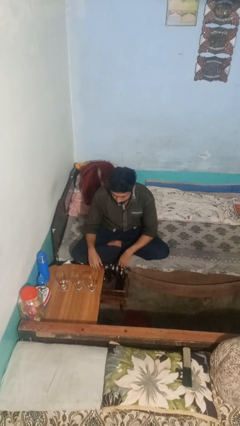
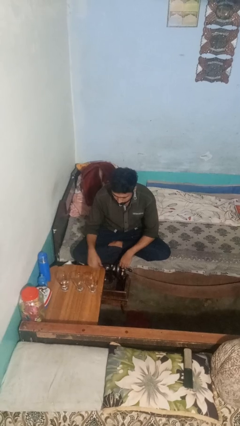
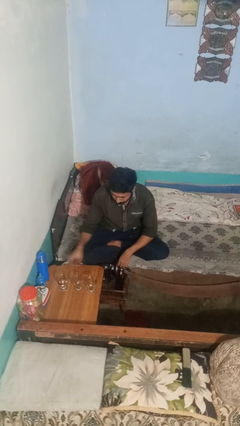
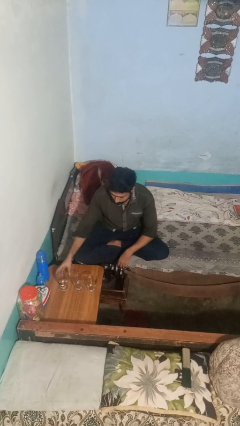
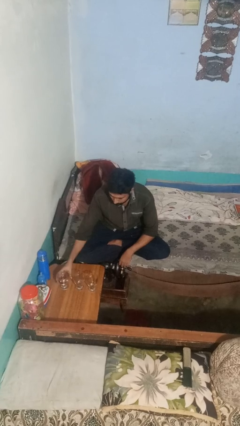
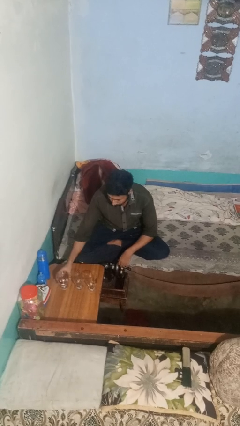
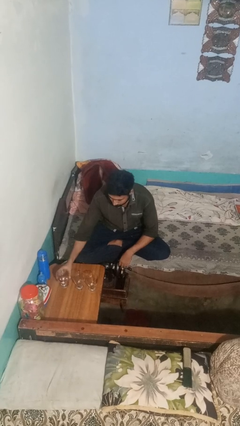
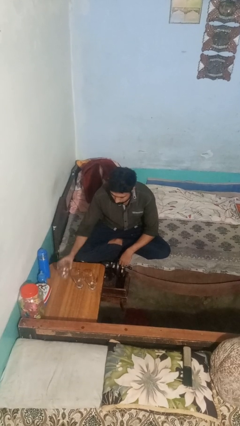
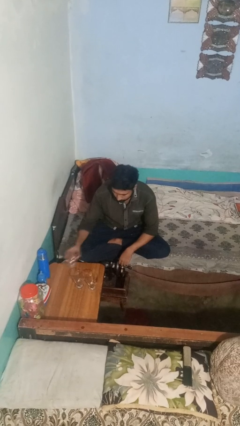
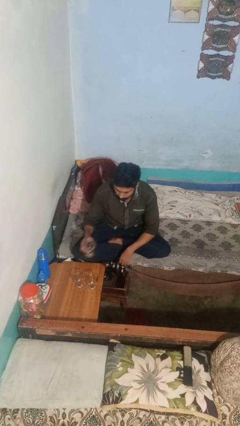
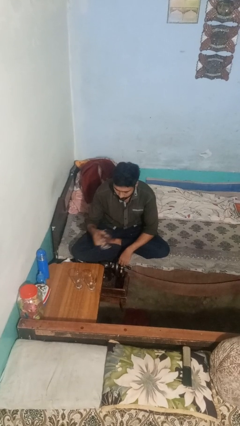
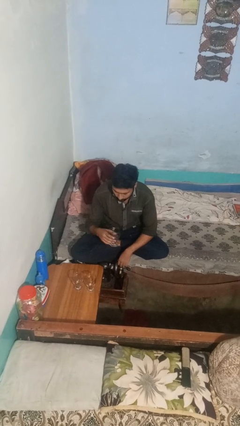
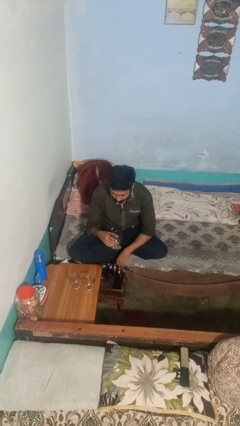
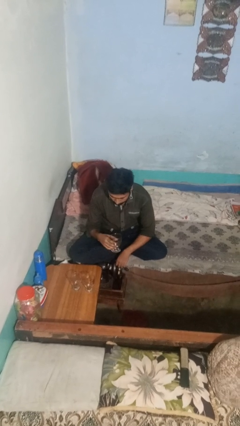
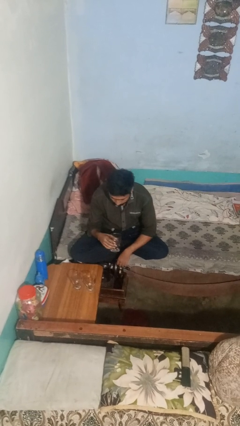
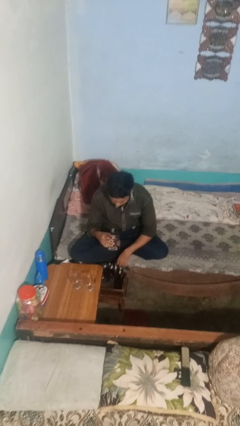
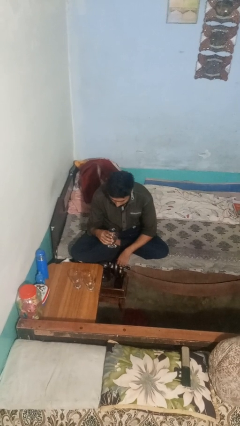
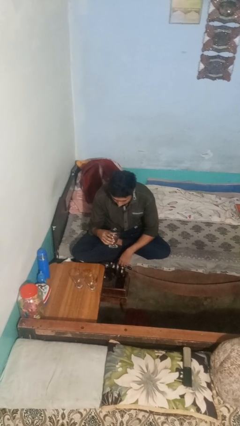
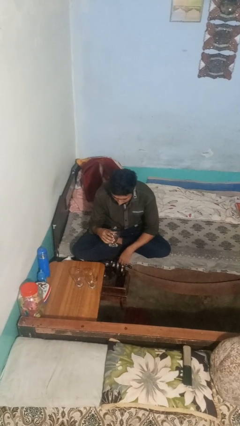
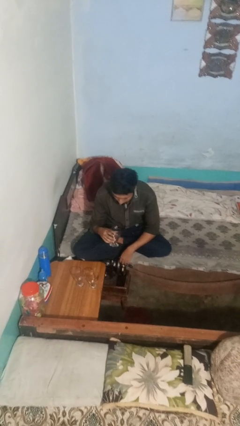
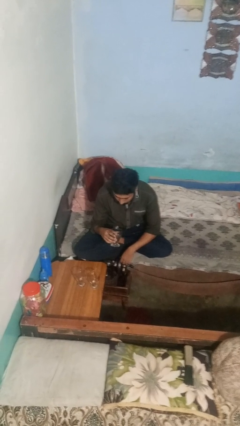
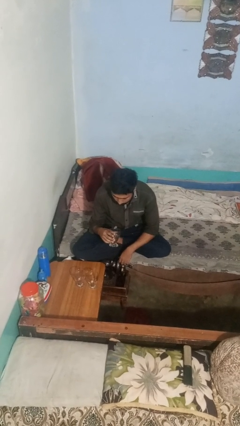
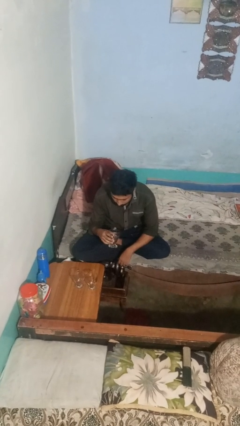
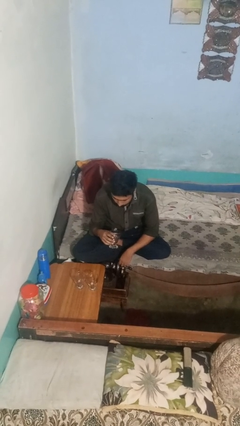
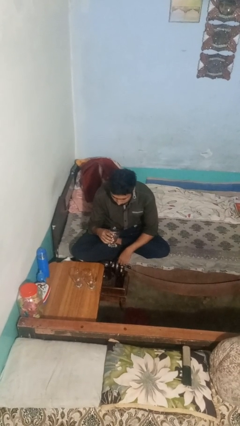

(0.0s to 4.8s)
person picks up object from table

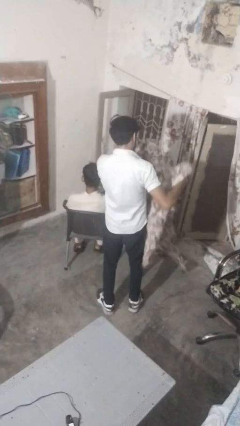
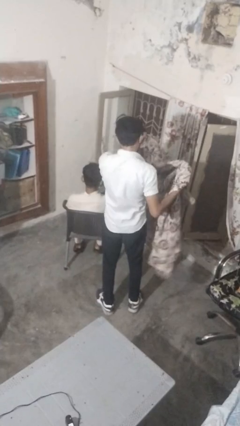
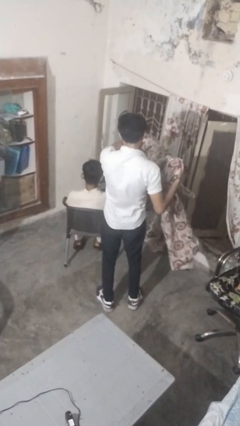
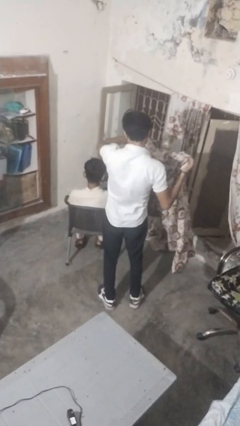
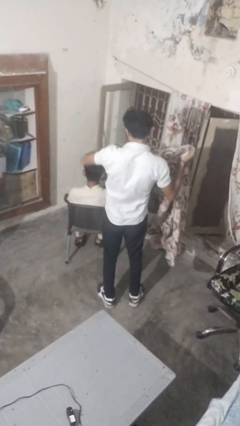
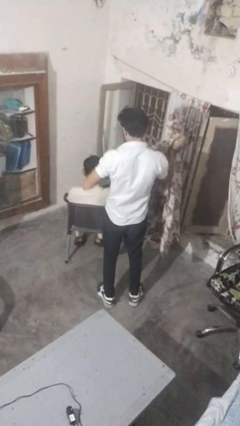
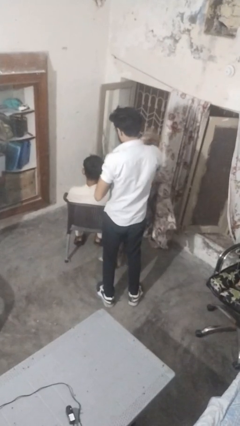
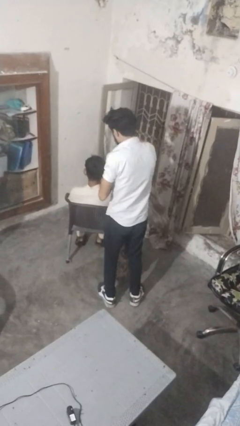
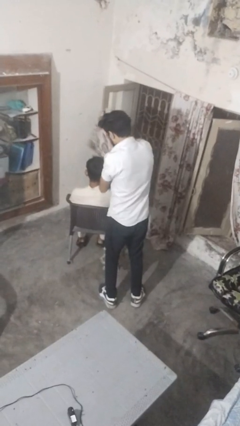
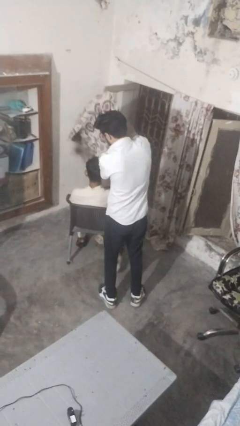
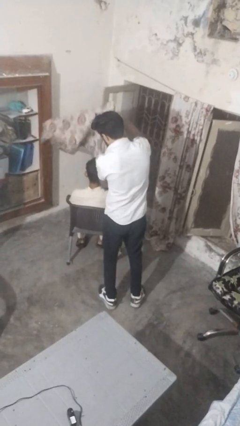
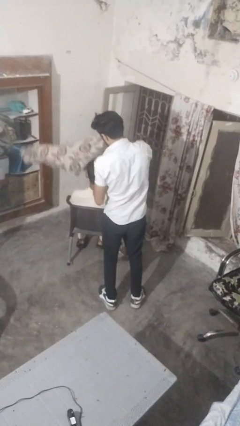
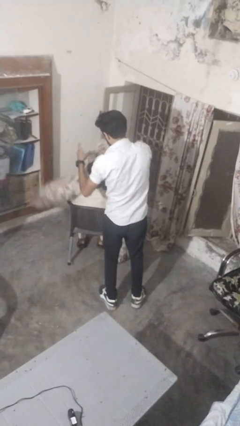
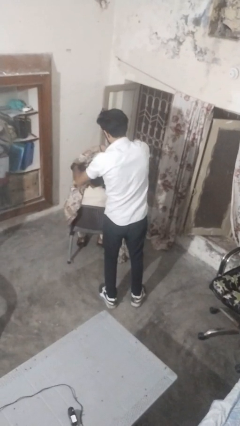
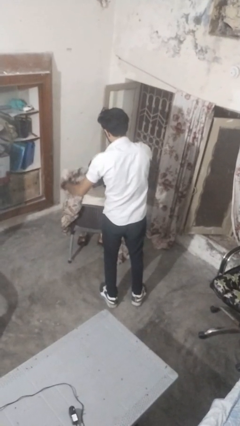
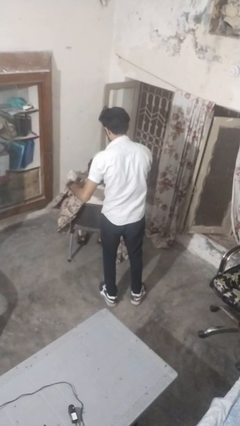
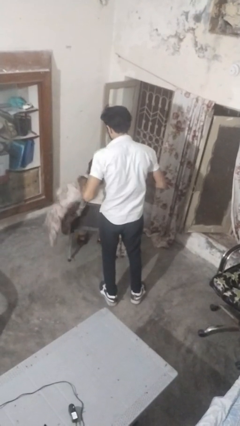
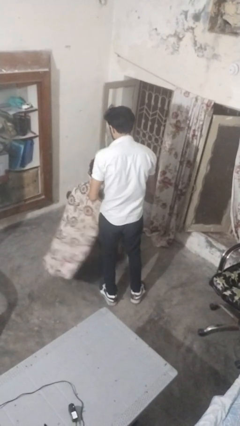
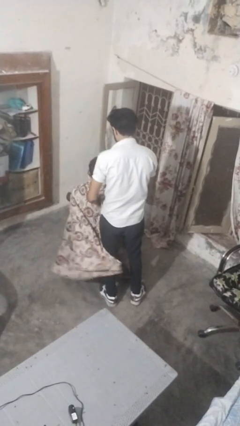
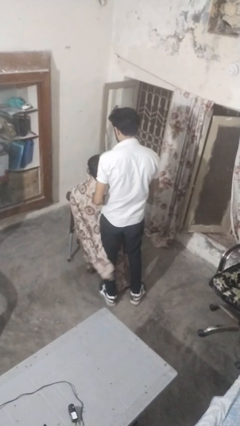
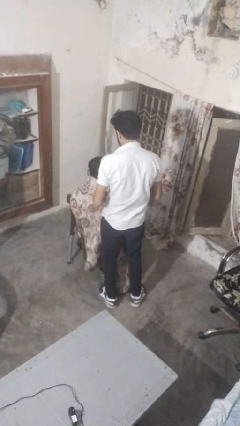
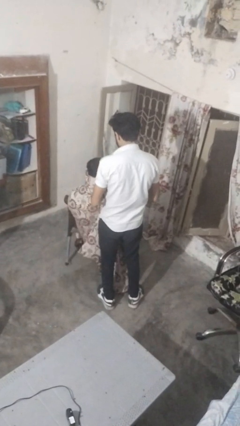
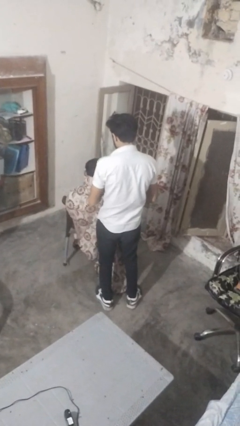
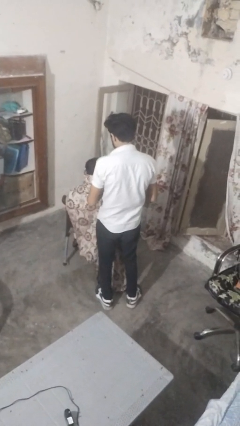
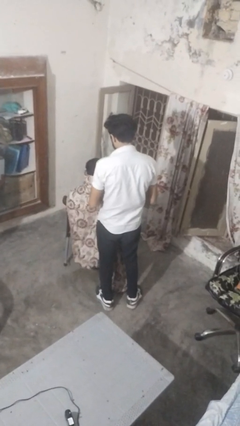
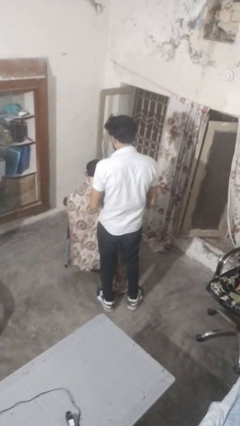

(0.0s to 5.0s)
person covers friend with blanket

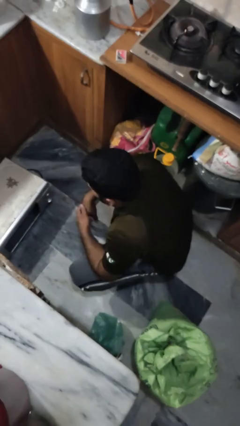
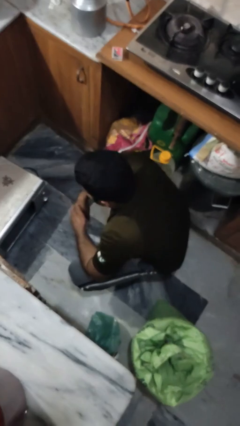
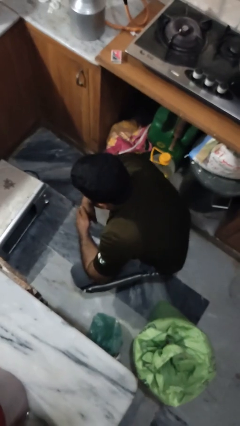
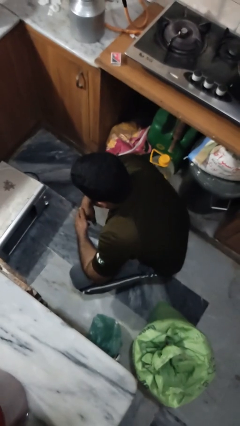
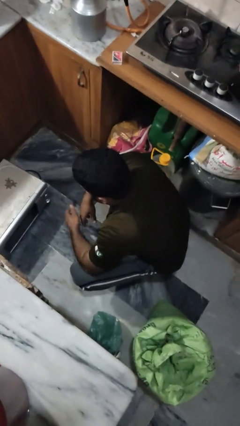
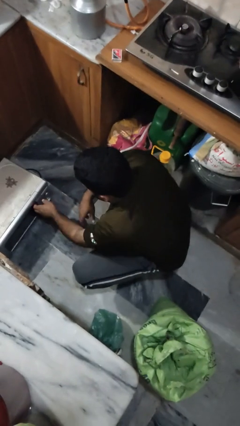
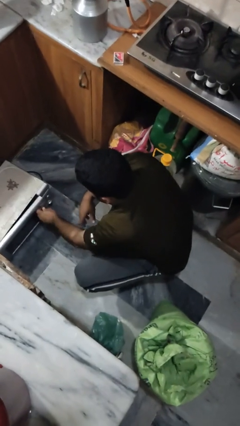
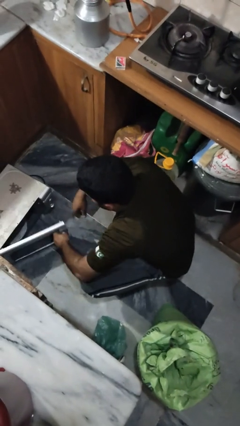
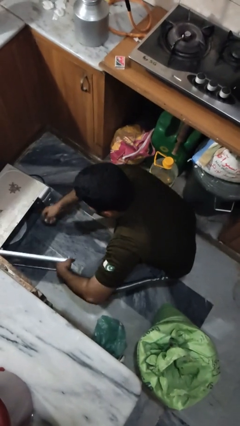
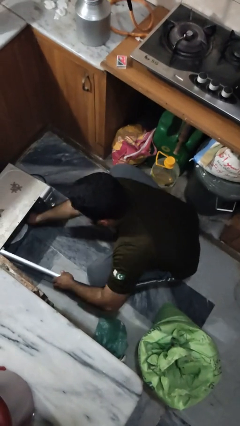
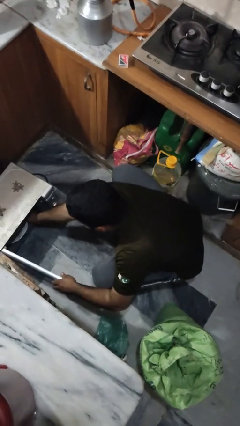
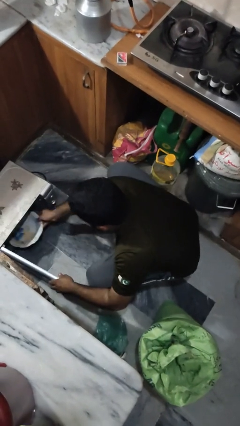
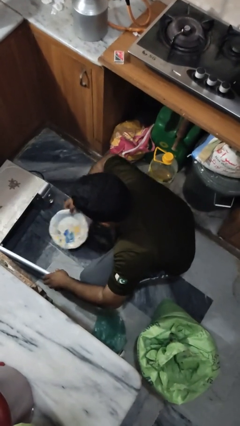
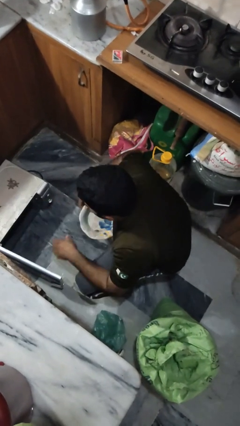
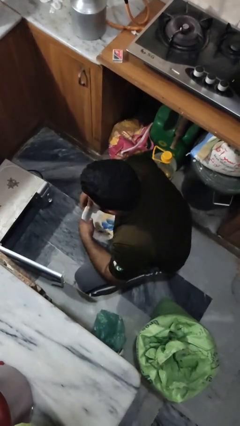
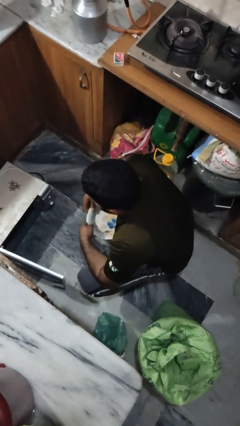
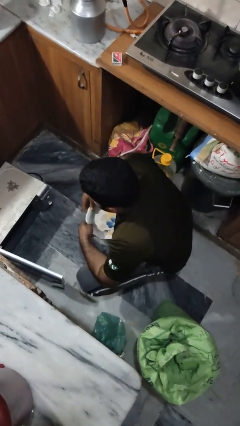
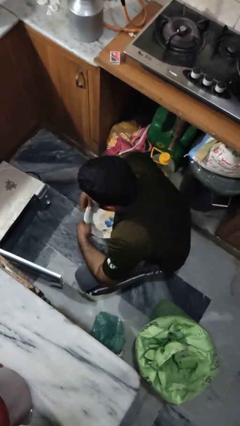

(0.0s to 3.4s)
person takes object from oven

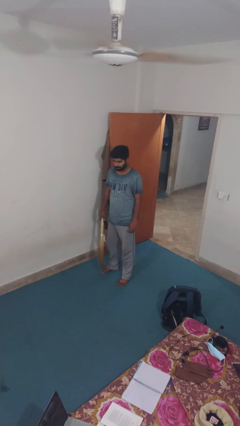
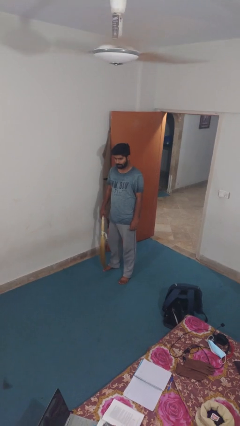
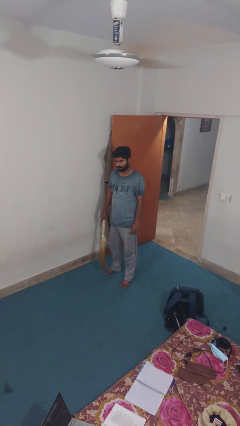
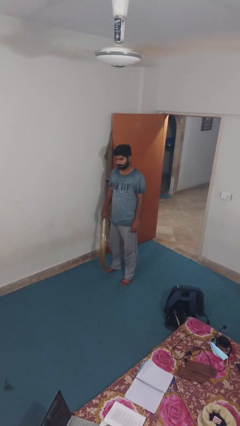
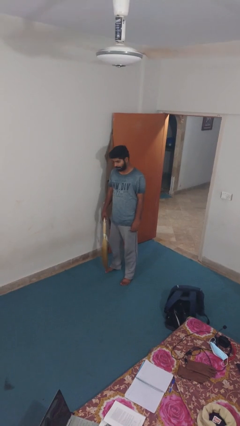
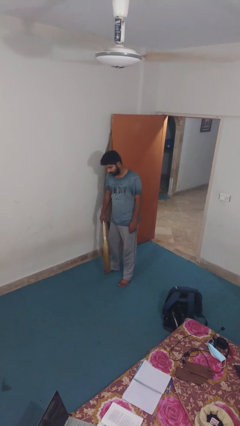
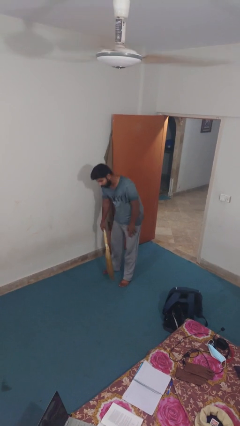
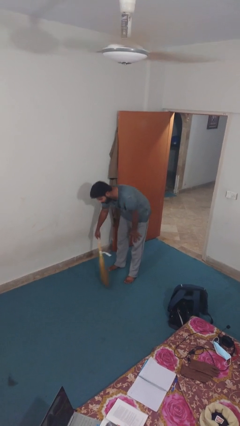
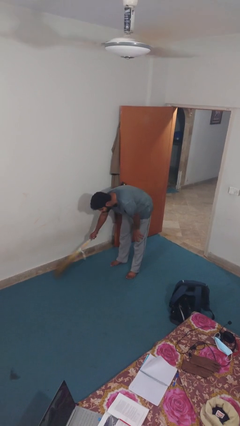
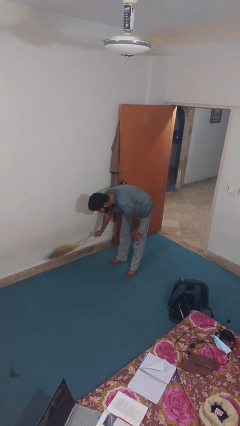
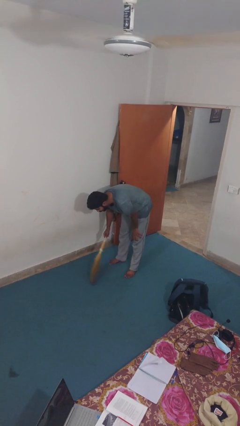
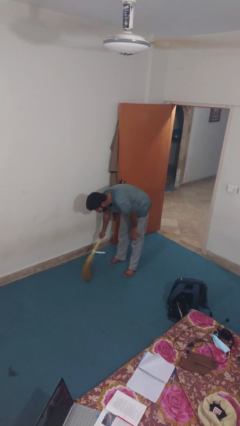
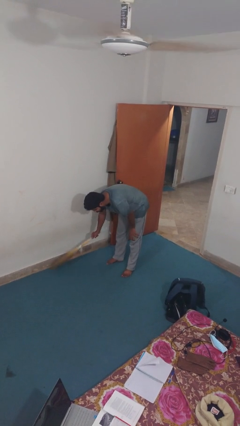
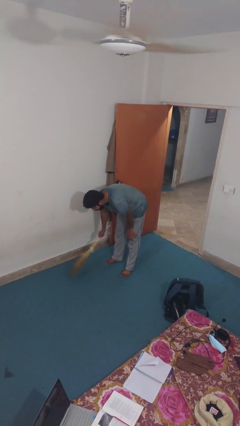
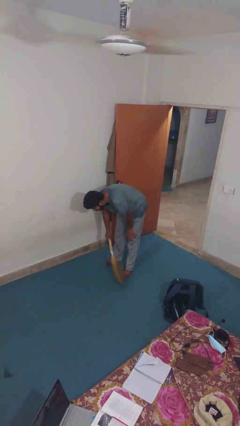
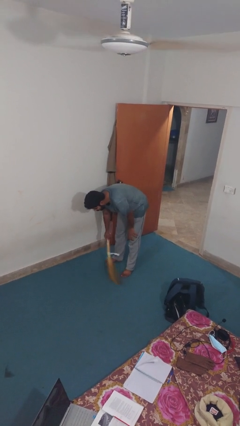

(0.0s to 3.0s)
person sweeps floor

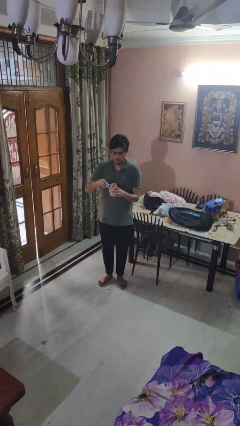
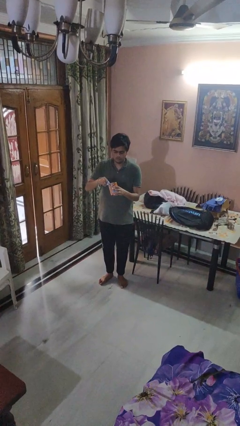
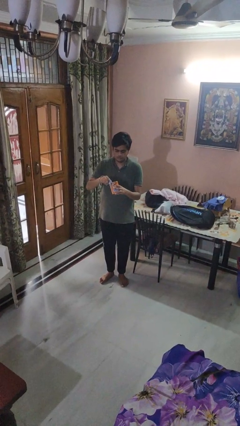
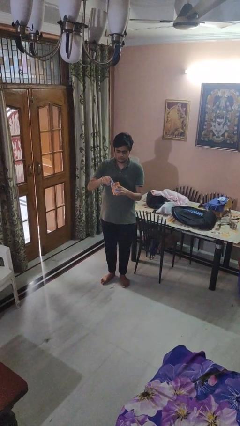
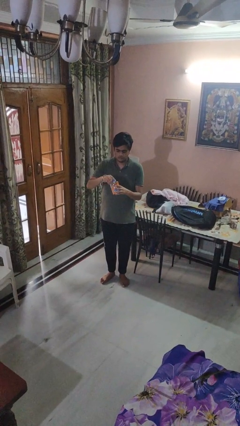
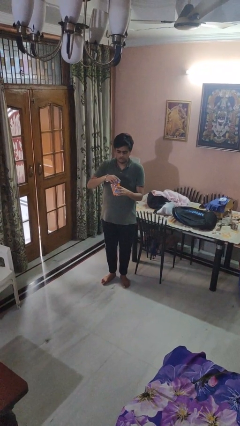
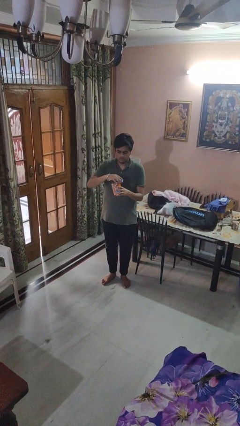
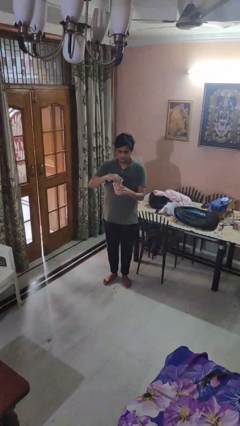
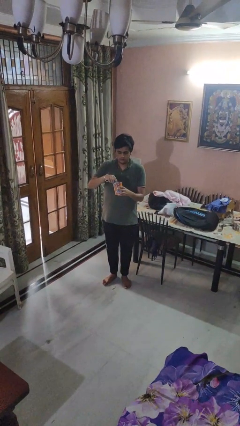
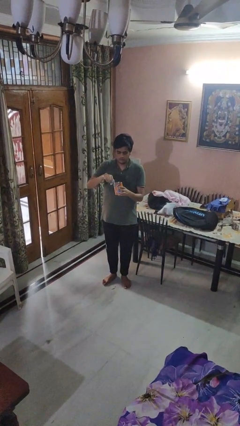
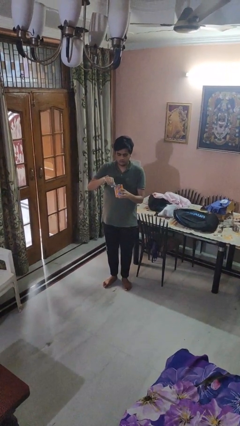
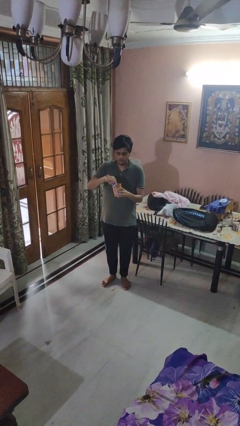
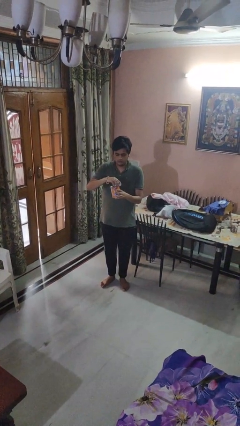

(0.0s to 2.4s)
person opens can with can opener
